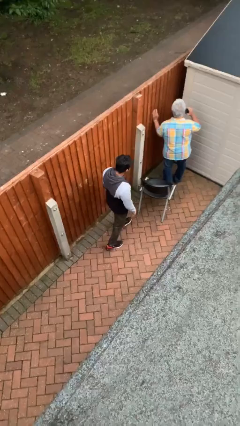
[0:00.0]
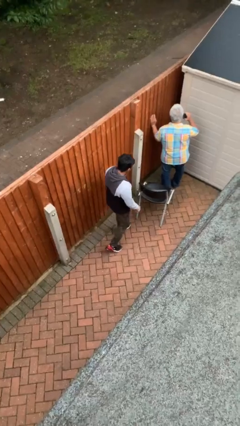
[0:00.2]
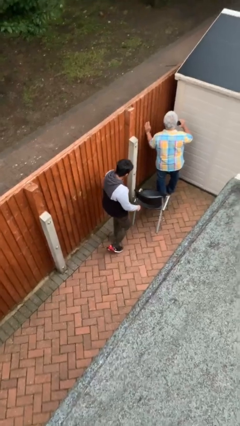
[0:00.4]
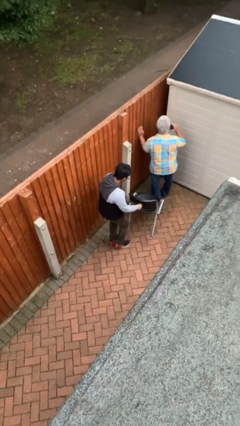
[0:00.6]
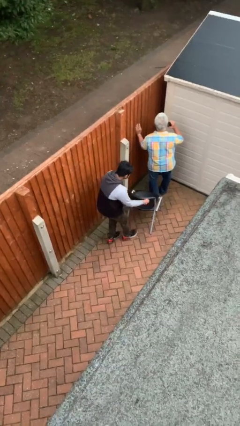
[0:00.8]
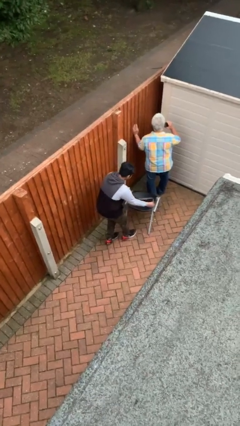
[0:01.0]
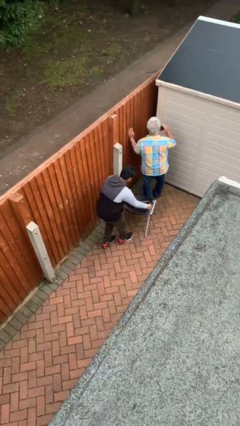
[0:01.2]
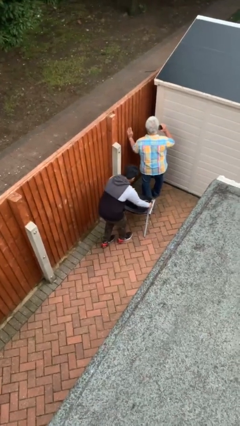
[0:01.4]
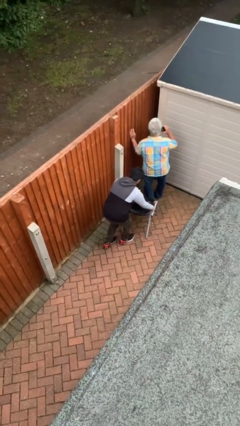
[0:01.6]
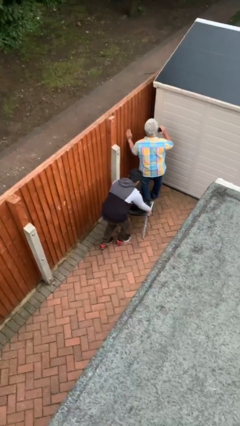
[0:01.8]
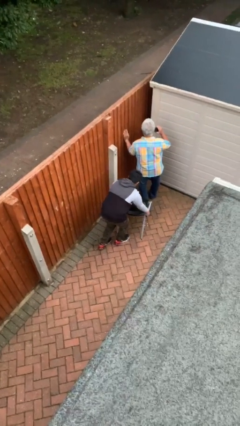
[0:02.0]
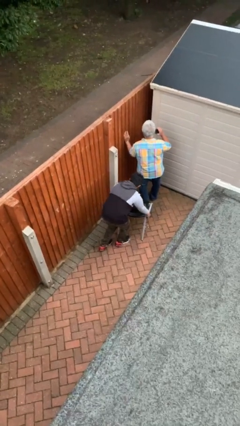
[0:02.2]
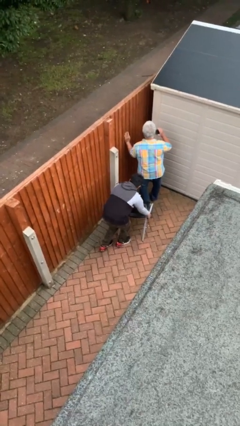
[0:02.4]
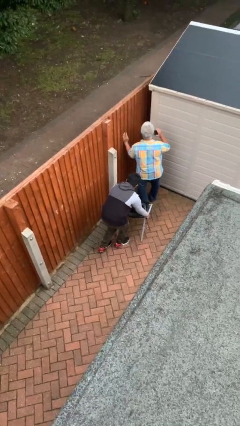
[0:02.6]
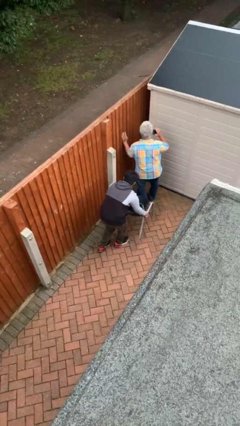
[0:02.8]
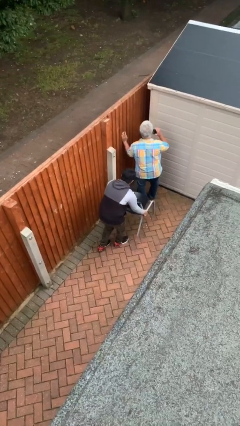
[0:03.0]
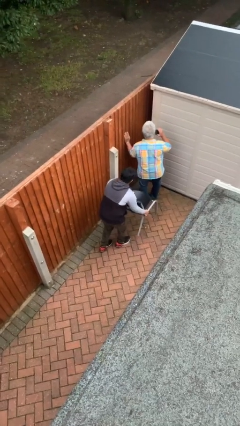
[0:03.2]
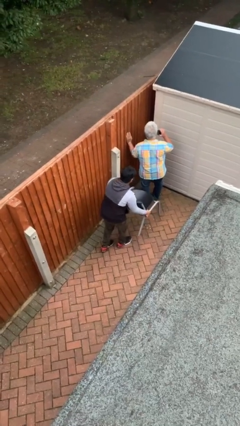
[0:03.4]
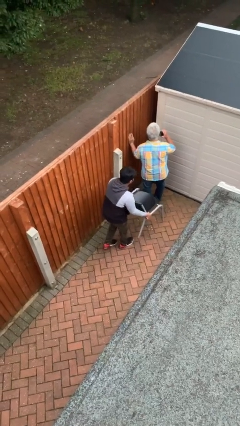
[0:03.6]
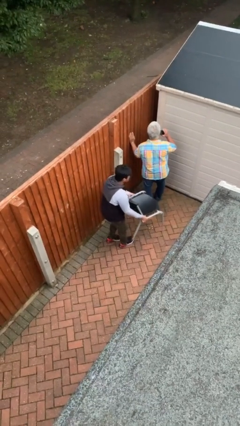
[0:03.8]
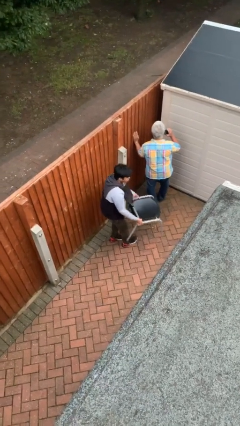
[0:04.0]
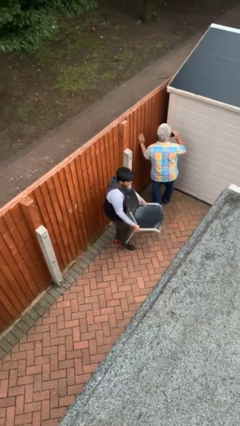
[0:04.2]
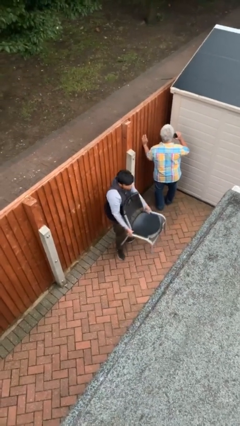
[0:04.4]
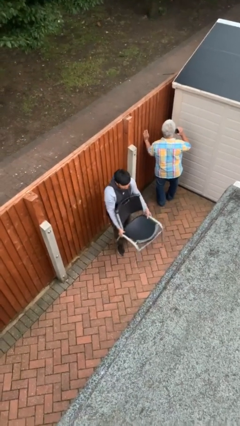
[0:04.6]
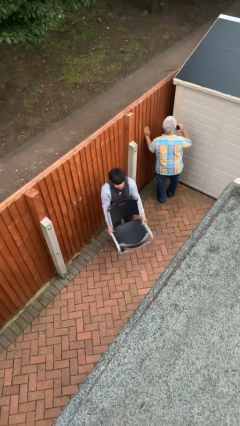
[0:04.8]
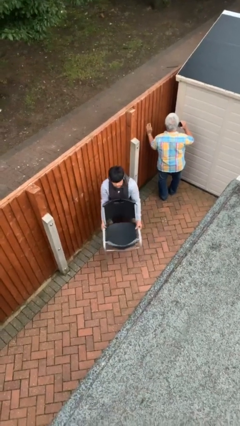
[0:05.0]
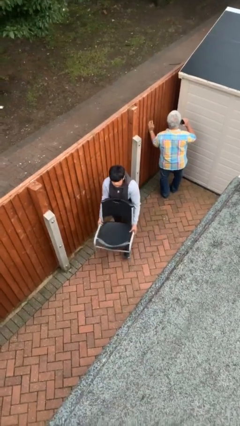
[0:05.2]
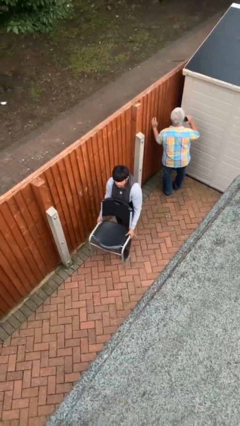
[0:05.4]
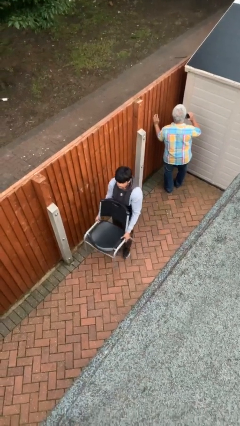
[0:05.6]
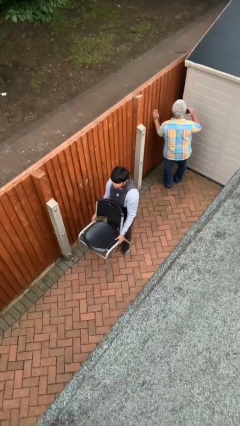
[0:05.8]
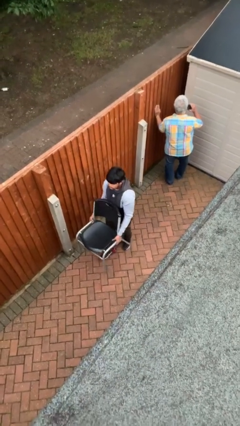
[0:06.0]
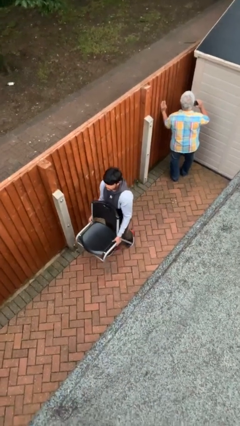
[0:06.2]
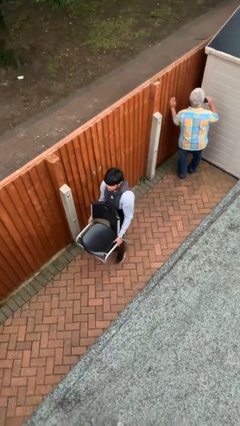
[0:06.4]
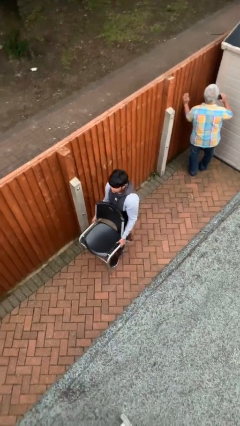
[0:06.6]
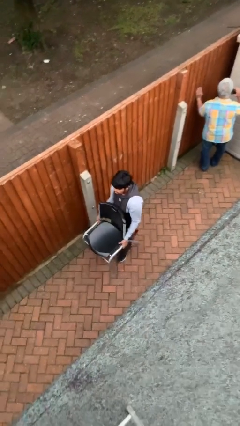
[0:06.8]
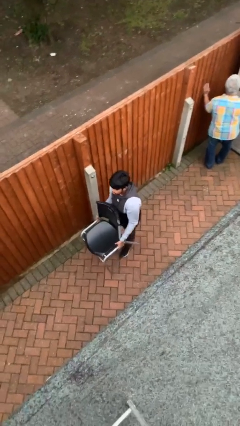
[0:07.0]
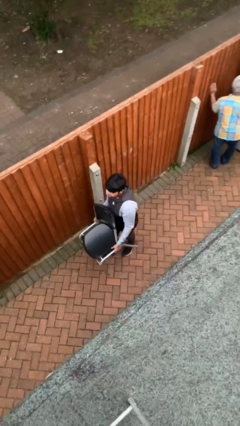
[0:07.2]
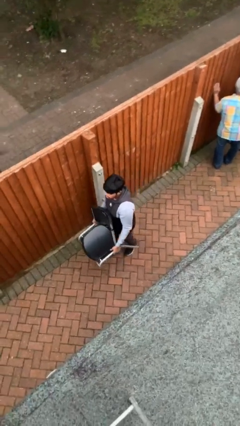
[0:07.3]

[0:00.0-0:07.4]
person steals object from person

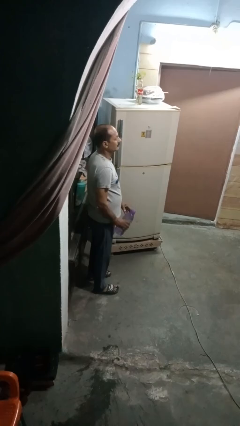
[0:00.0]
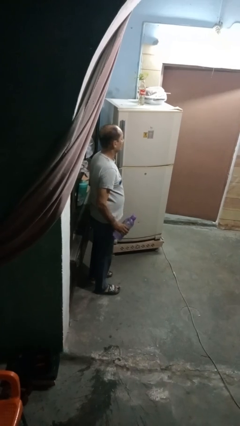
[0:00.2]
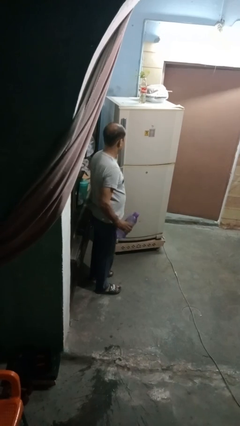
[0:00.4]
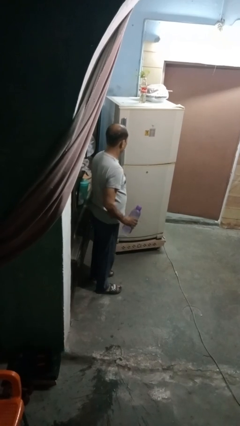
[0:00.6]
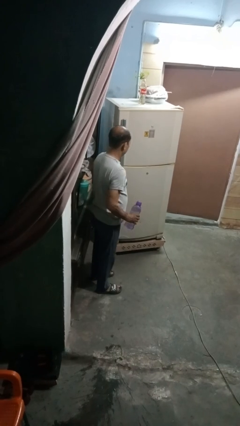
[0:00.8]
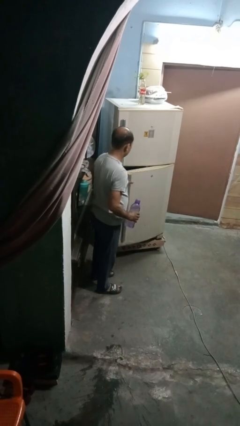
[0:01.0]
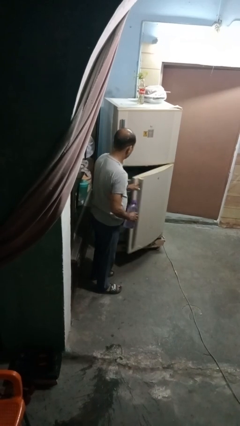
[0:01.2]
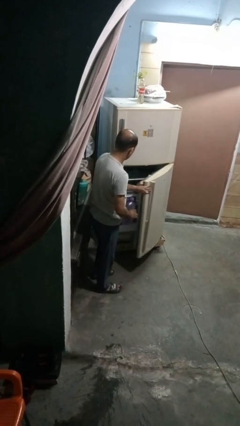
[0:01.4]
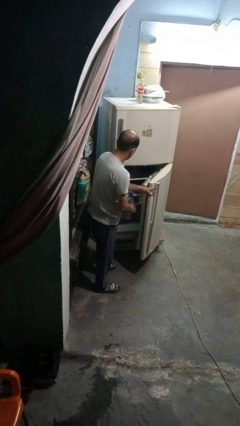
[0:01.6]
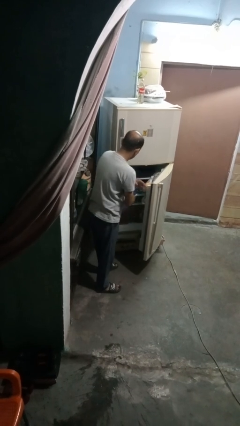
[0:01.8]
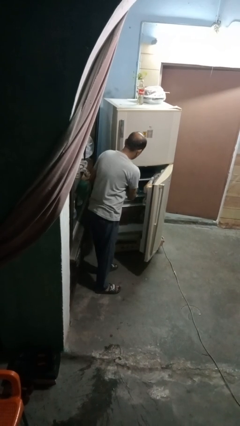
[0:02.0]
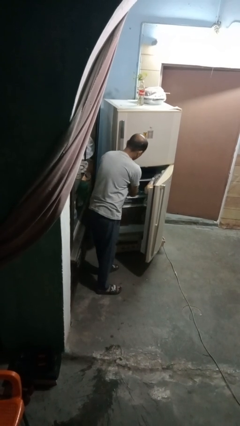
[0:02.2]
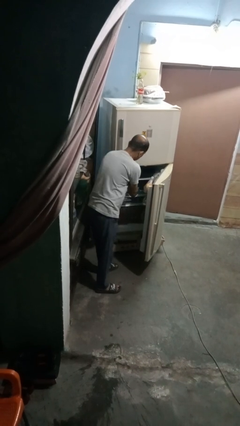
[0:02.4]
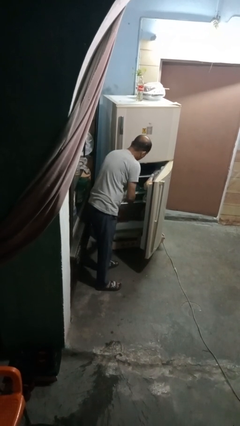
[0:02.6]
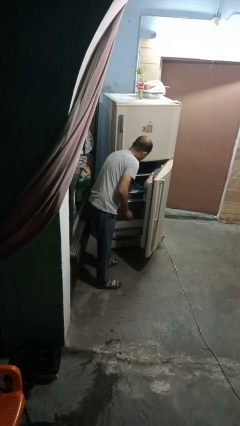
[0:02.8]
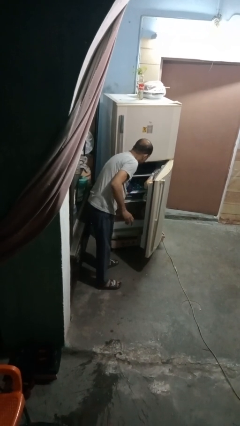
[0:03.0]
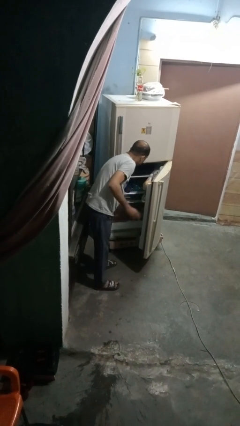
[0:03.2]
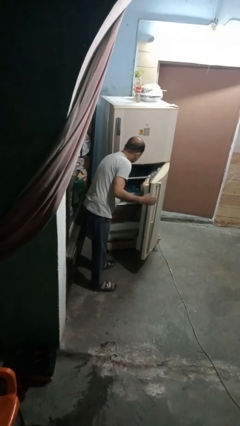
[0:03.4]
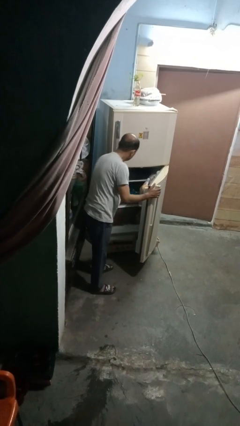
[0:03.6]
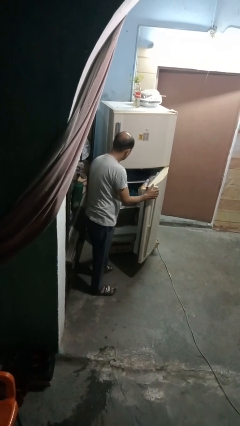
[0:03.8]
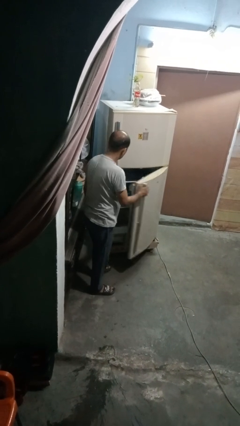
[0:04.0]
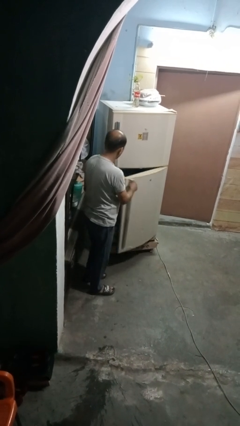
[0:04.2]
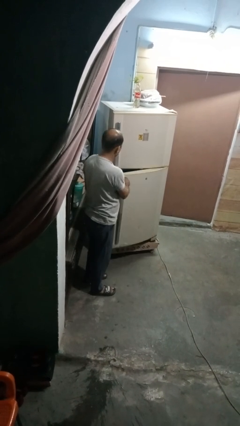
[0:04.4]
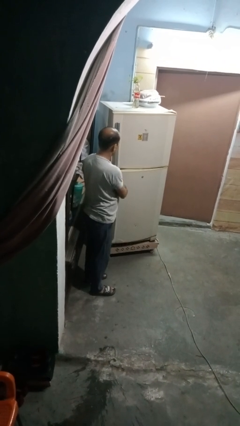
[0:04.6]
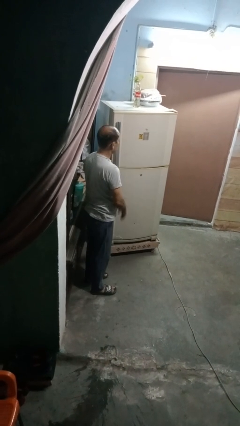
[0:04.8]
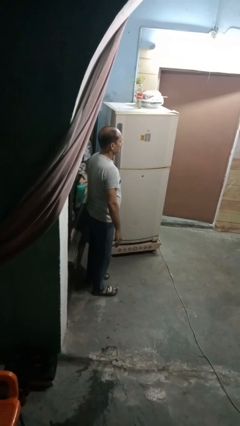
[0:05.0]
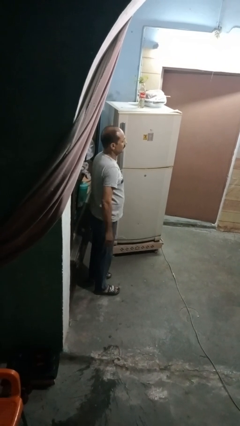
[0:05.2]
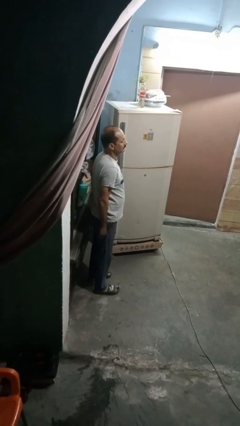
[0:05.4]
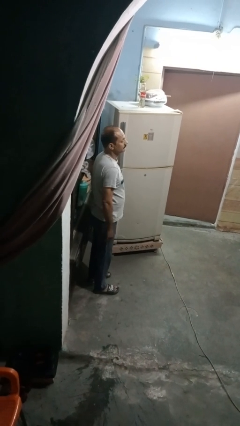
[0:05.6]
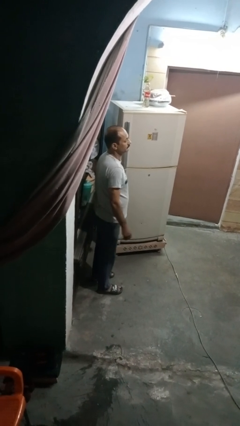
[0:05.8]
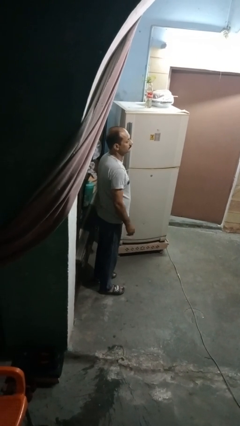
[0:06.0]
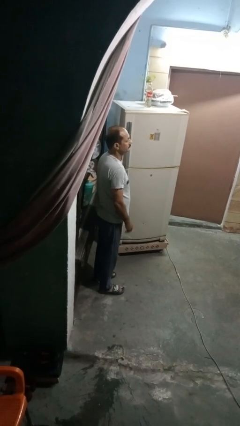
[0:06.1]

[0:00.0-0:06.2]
person puts object into refrigerator

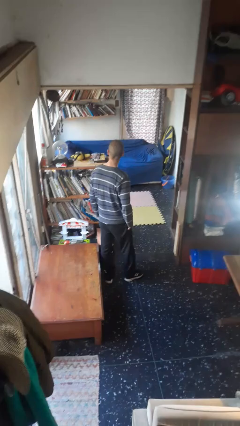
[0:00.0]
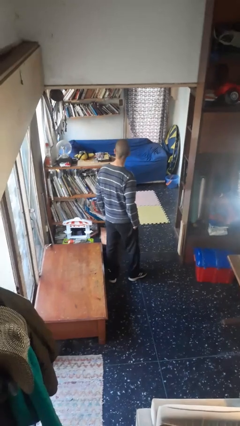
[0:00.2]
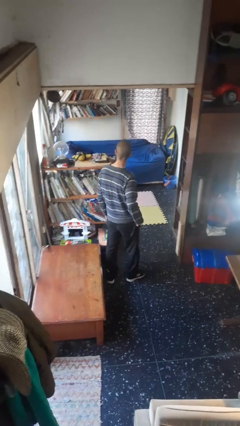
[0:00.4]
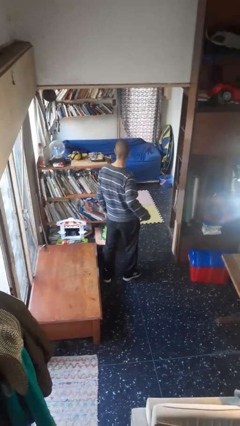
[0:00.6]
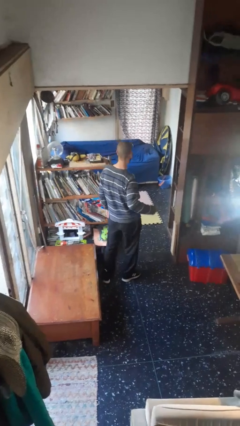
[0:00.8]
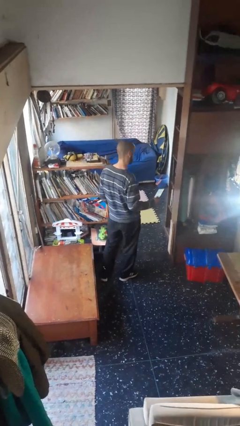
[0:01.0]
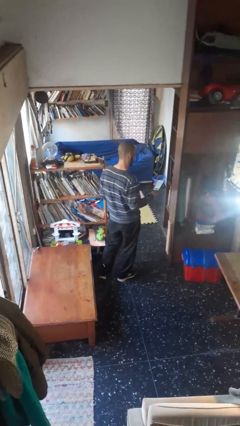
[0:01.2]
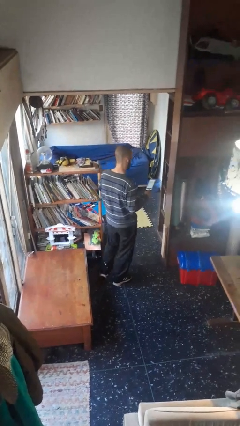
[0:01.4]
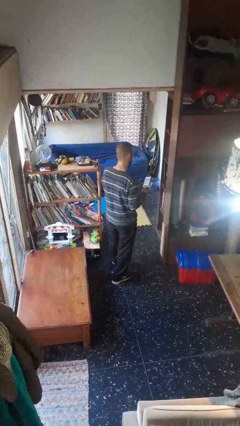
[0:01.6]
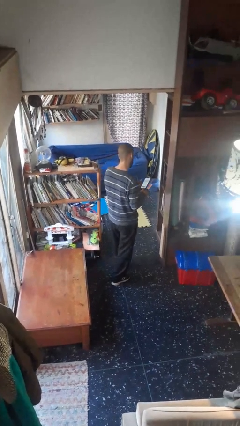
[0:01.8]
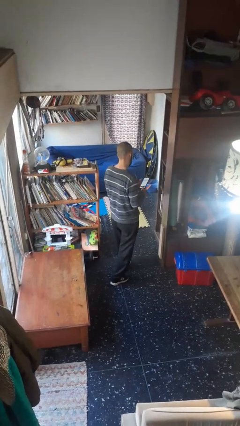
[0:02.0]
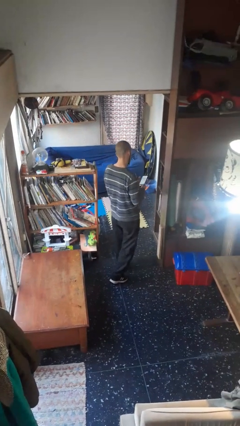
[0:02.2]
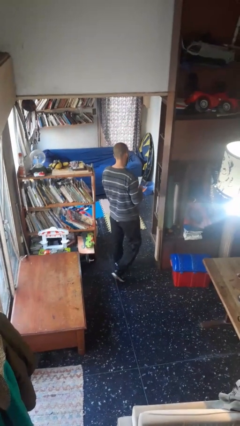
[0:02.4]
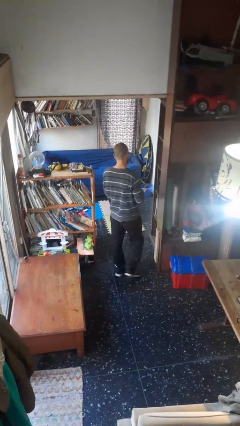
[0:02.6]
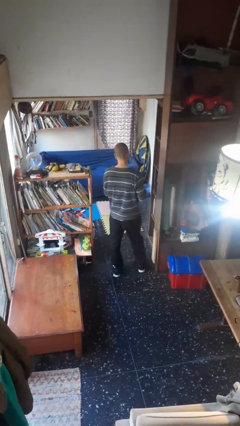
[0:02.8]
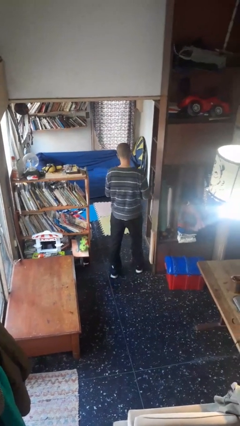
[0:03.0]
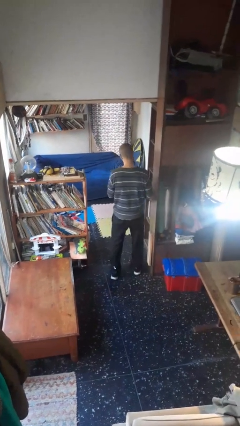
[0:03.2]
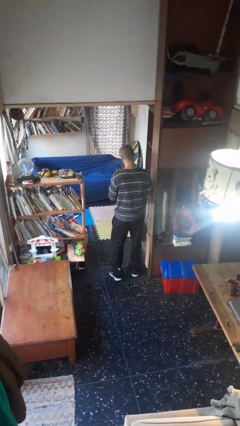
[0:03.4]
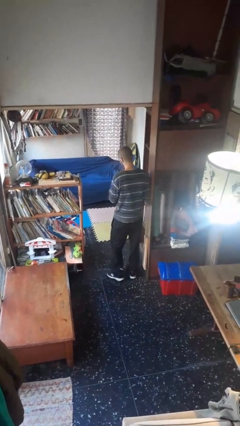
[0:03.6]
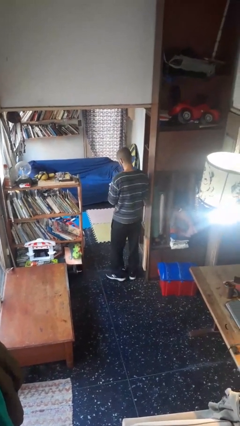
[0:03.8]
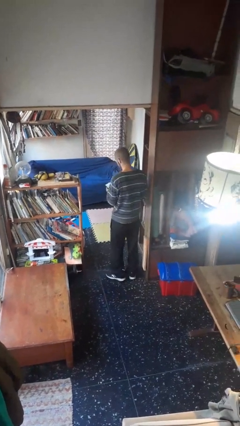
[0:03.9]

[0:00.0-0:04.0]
person takes phone from pocket
